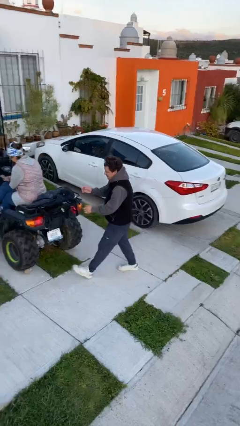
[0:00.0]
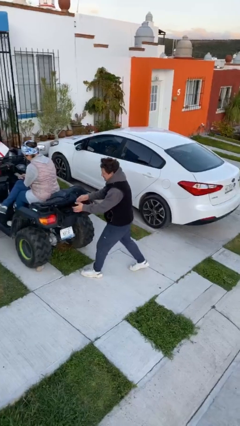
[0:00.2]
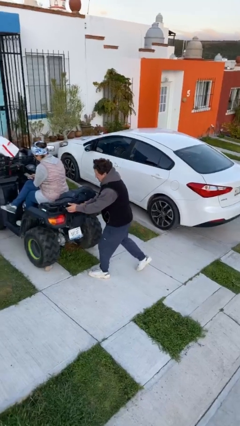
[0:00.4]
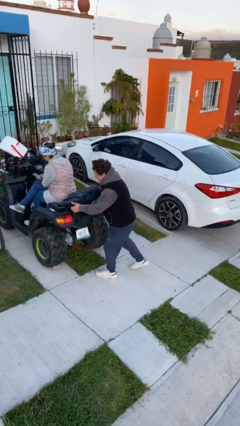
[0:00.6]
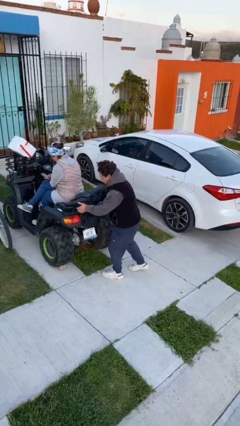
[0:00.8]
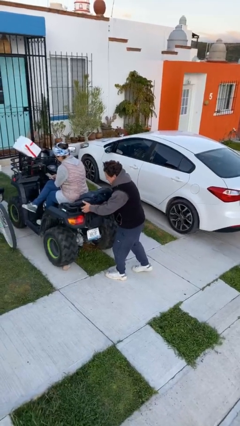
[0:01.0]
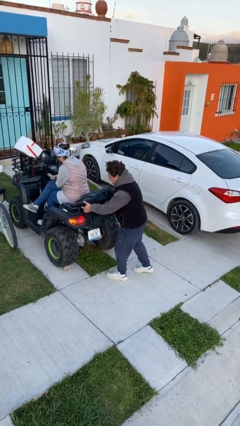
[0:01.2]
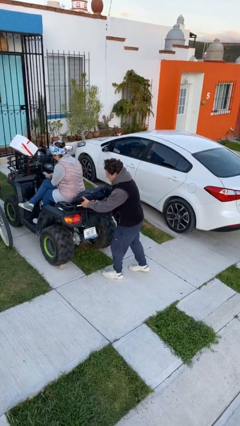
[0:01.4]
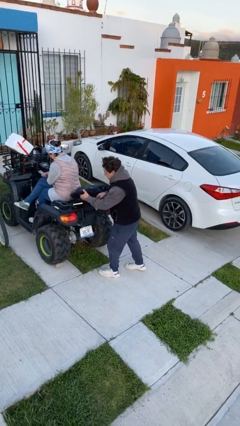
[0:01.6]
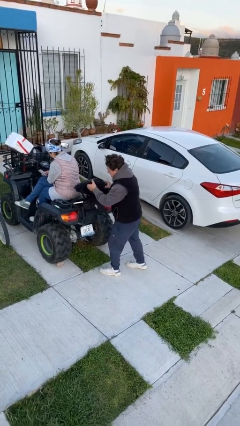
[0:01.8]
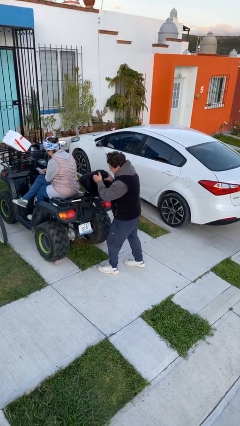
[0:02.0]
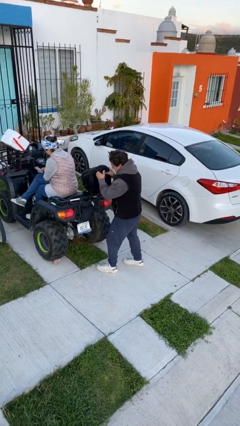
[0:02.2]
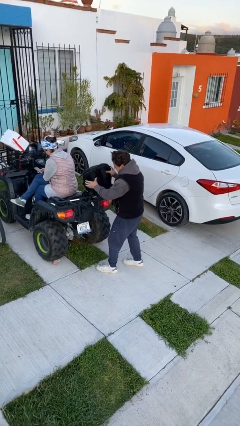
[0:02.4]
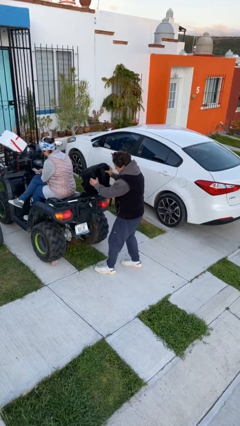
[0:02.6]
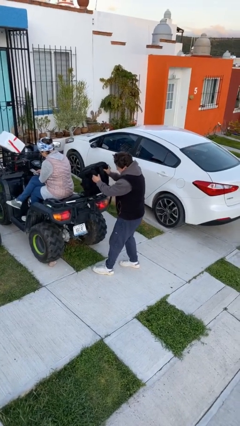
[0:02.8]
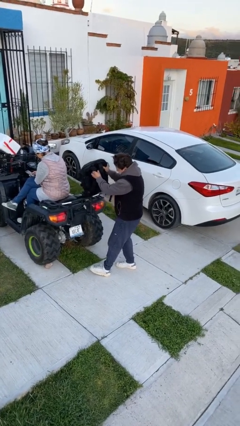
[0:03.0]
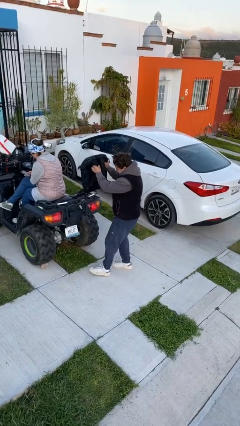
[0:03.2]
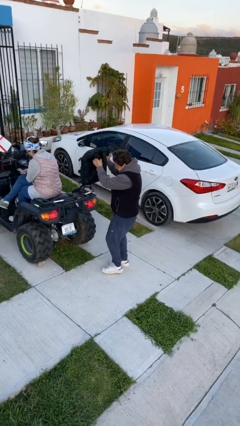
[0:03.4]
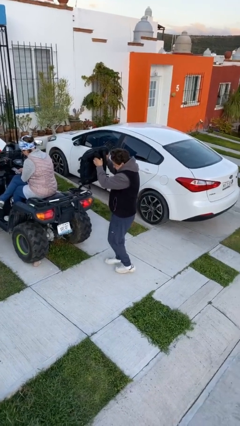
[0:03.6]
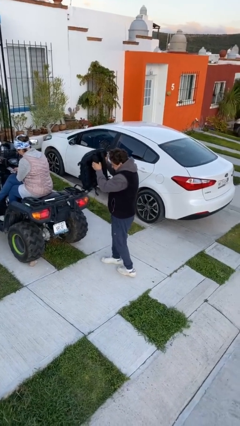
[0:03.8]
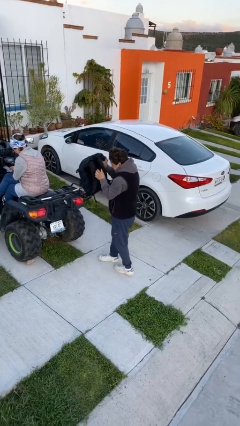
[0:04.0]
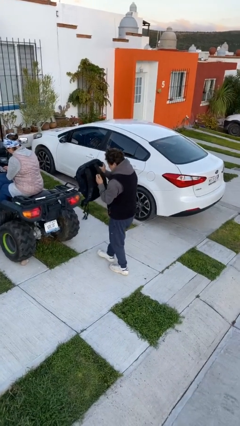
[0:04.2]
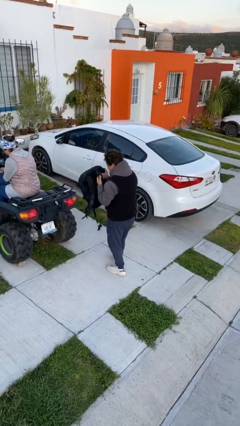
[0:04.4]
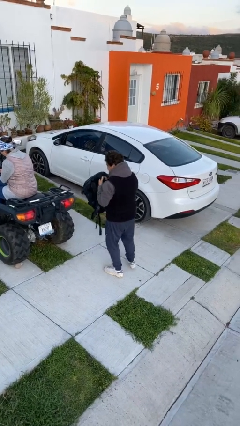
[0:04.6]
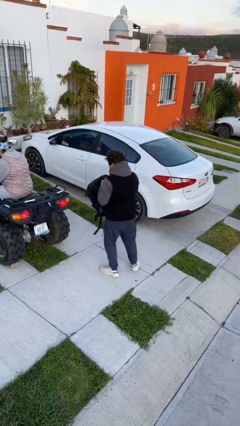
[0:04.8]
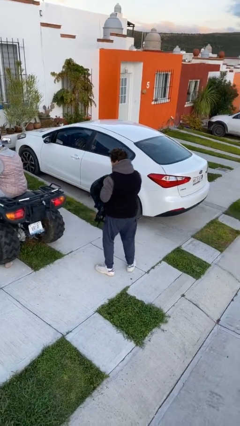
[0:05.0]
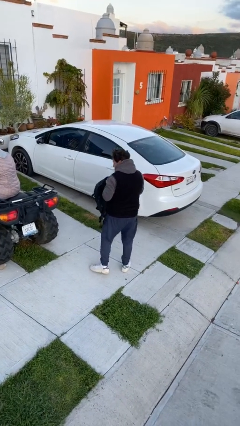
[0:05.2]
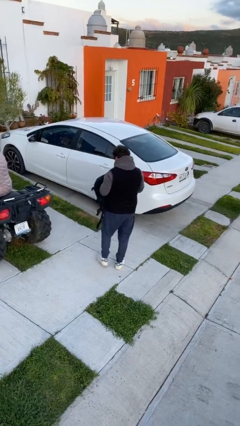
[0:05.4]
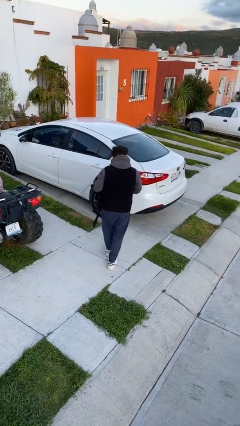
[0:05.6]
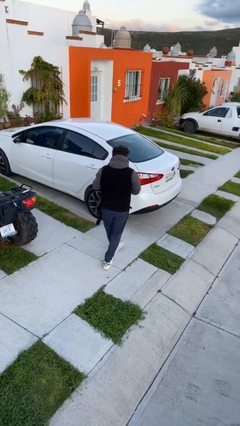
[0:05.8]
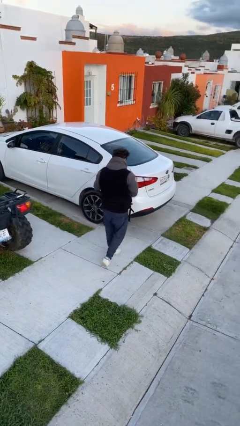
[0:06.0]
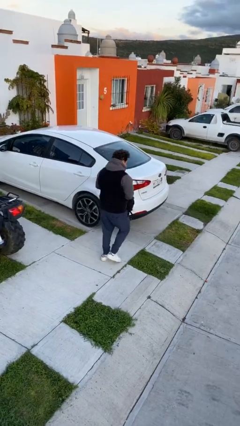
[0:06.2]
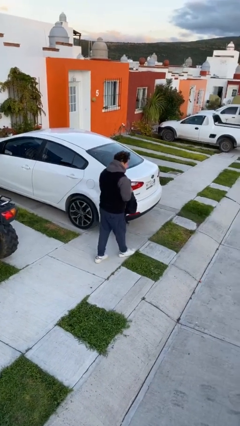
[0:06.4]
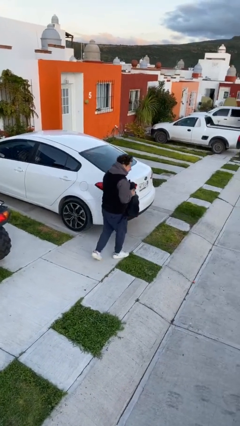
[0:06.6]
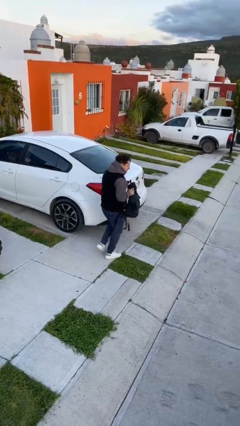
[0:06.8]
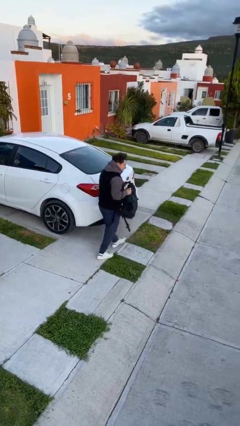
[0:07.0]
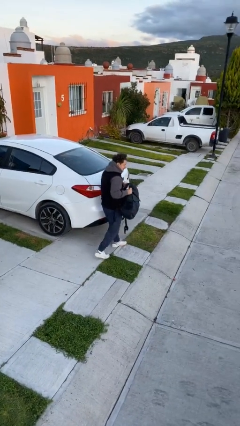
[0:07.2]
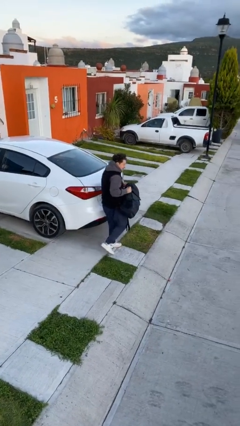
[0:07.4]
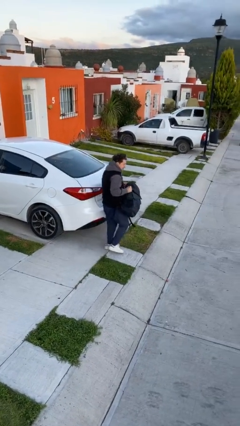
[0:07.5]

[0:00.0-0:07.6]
person steals object from person

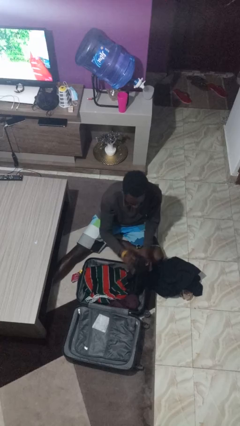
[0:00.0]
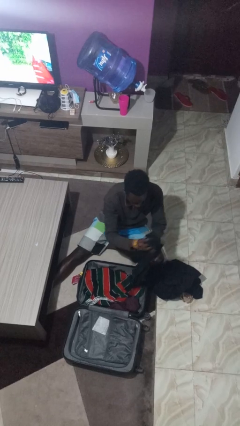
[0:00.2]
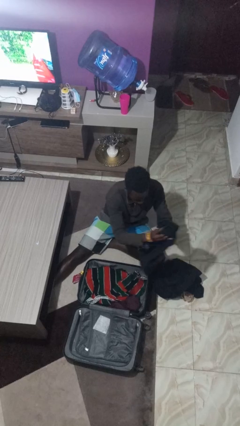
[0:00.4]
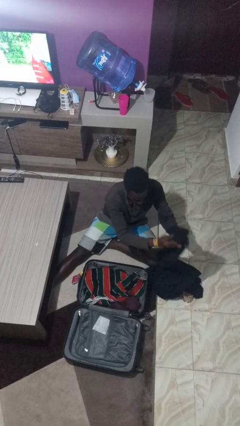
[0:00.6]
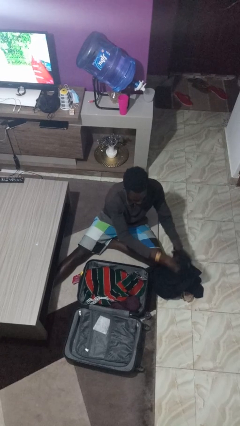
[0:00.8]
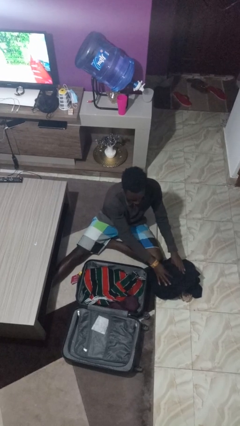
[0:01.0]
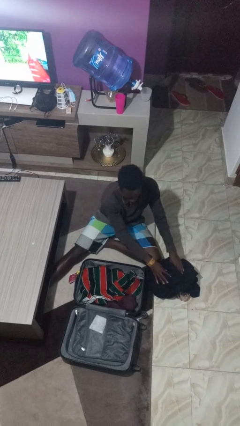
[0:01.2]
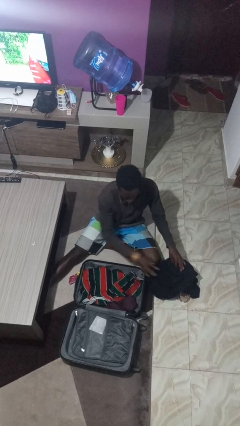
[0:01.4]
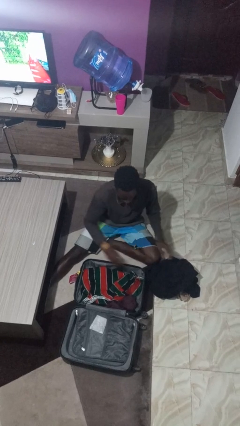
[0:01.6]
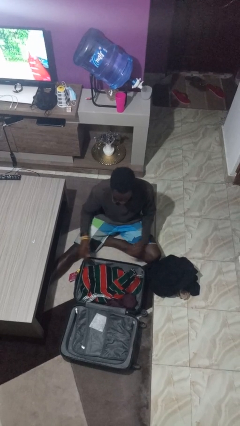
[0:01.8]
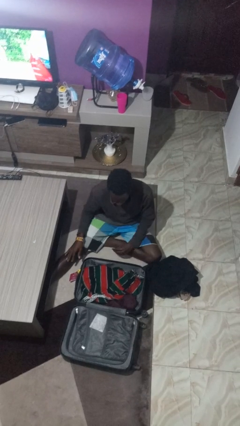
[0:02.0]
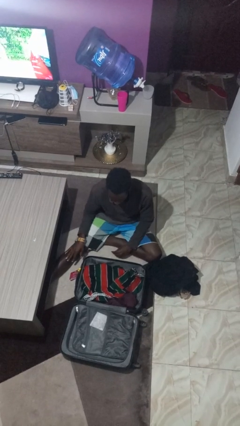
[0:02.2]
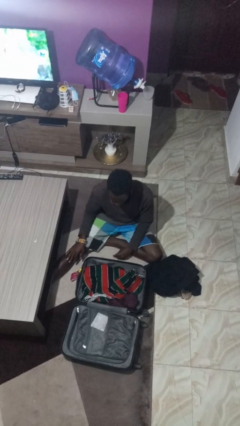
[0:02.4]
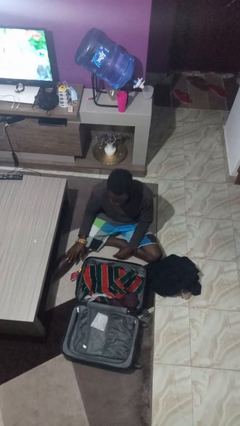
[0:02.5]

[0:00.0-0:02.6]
person unloads clothes from suitcase

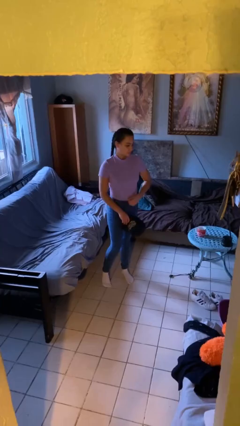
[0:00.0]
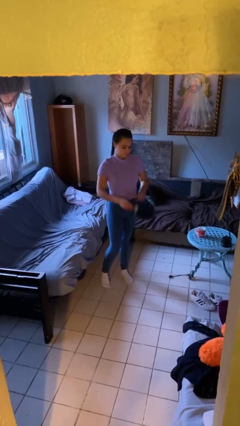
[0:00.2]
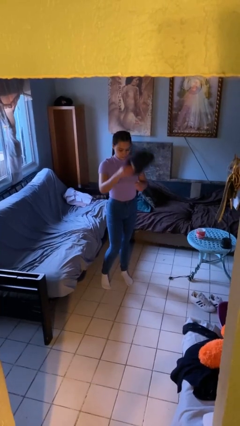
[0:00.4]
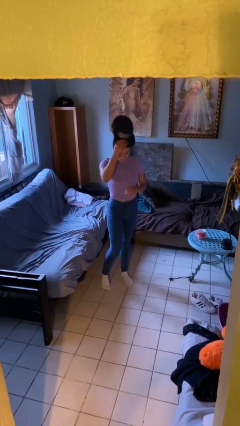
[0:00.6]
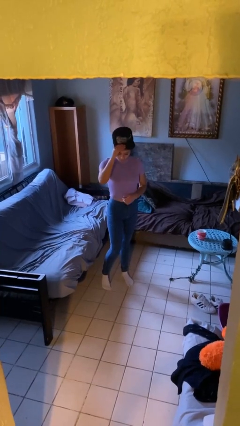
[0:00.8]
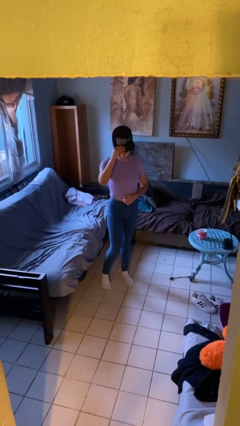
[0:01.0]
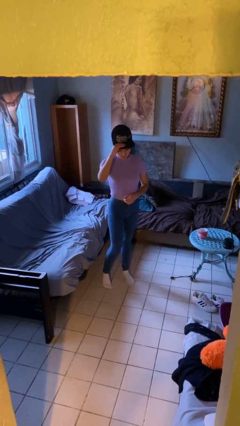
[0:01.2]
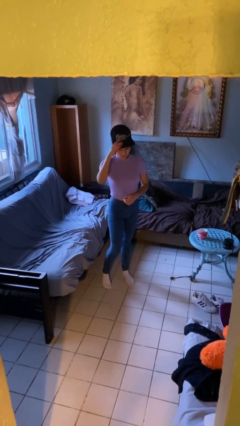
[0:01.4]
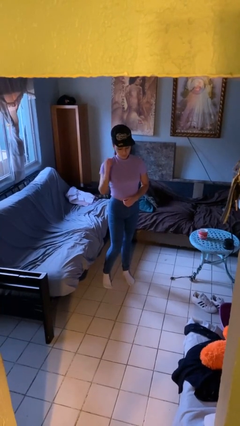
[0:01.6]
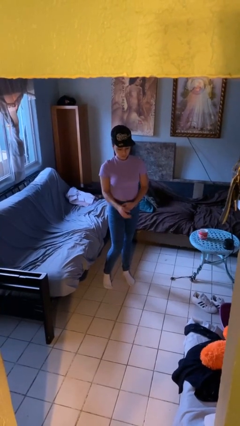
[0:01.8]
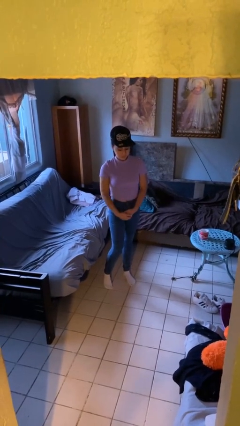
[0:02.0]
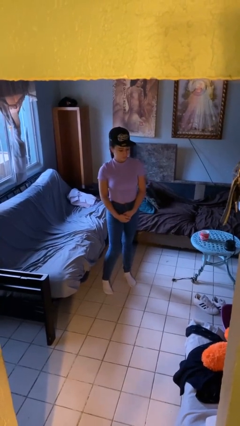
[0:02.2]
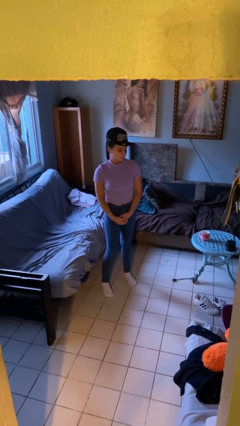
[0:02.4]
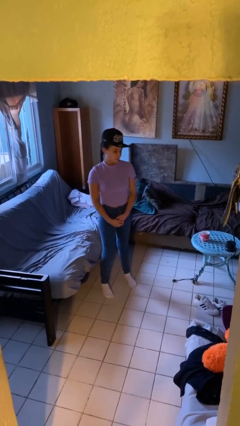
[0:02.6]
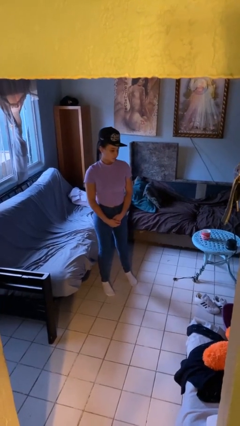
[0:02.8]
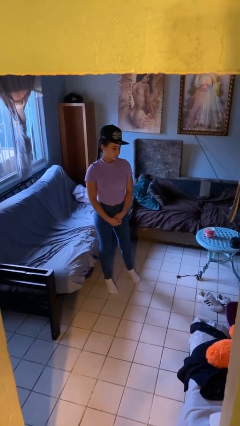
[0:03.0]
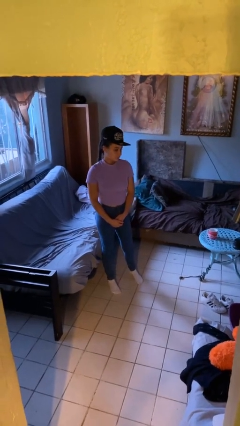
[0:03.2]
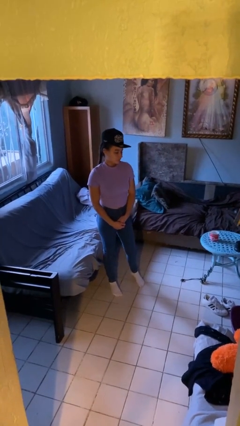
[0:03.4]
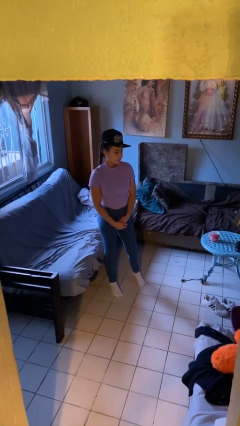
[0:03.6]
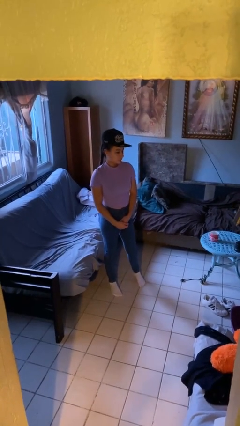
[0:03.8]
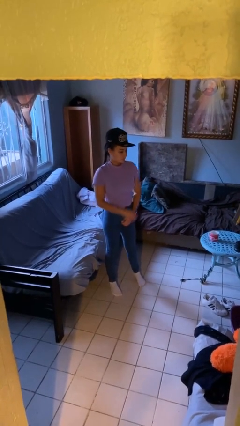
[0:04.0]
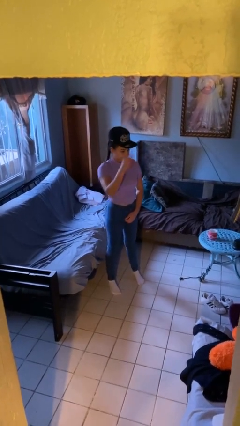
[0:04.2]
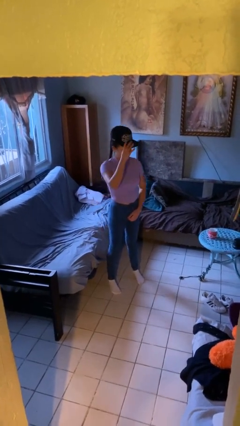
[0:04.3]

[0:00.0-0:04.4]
person puts on hat

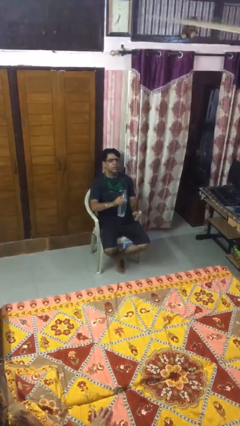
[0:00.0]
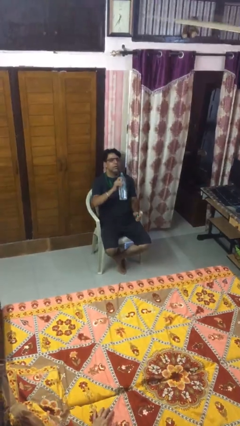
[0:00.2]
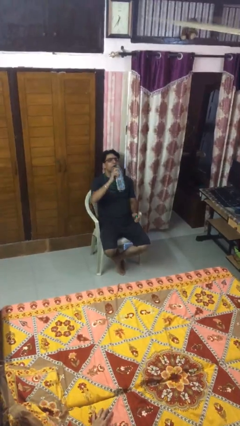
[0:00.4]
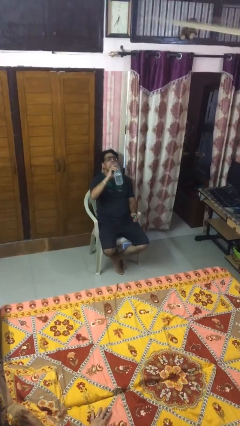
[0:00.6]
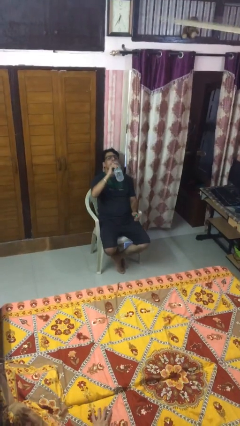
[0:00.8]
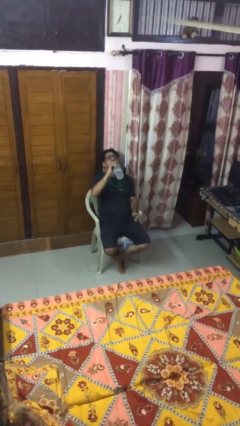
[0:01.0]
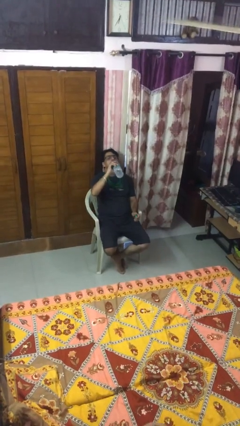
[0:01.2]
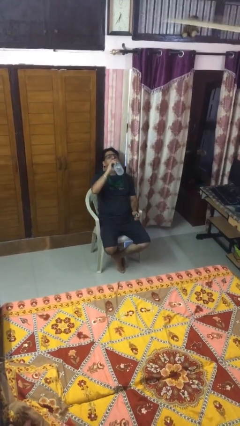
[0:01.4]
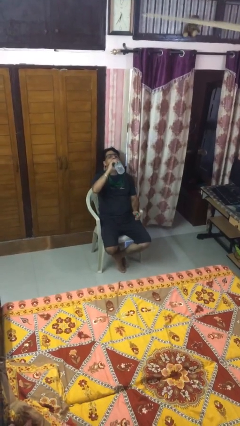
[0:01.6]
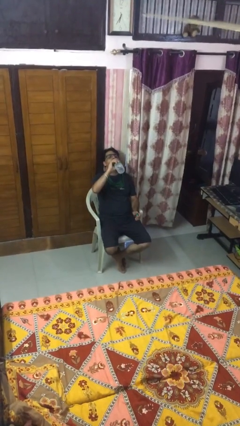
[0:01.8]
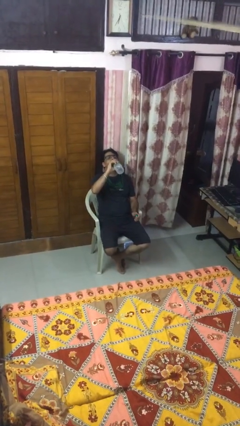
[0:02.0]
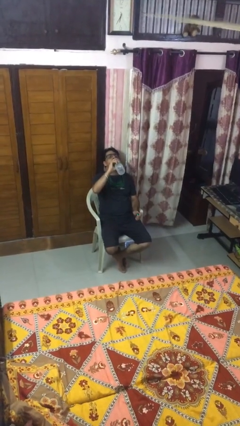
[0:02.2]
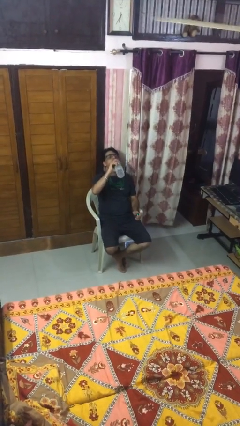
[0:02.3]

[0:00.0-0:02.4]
person drinks from bottle

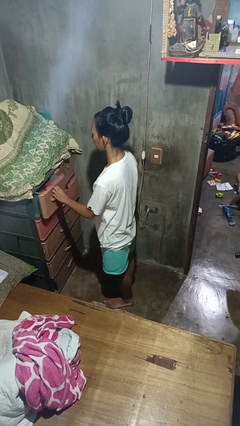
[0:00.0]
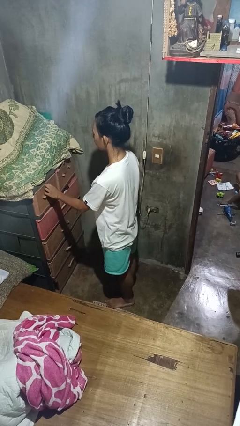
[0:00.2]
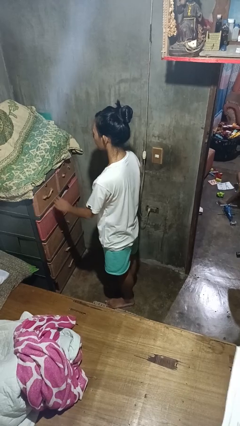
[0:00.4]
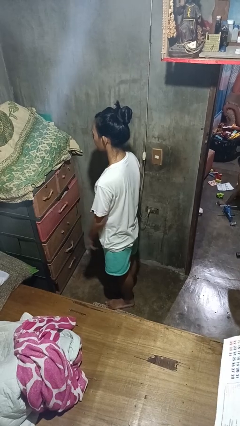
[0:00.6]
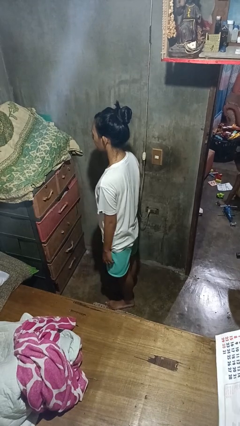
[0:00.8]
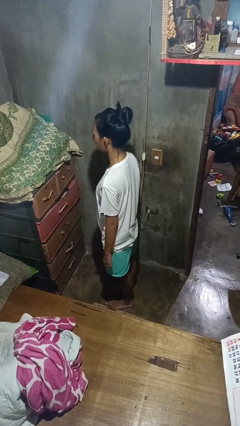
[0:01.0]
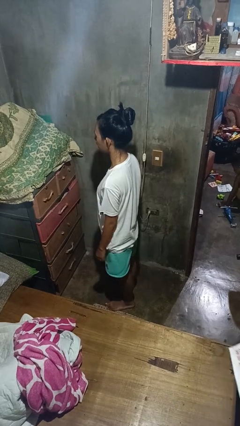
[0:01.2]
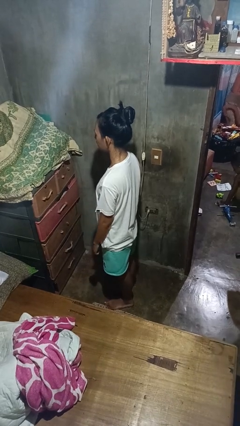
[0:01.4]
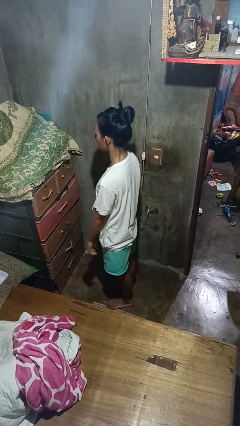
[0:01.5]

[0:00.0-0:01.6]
person closes dresser drawer
